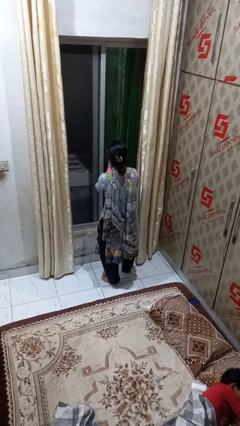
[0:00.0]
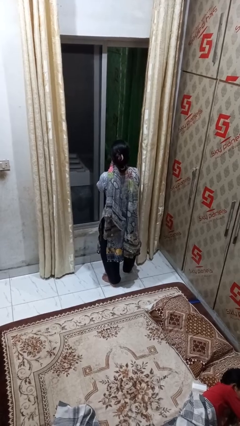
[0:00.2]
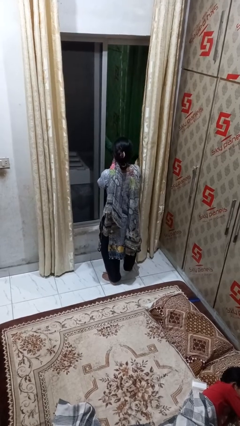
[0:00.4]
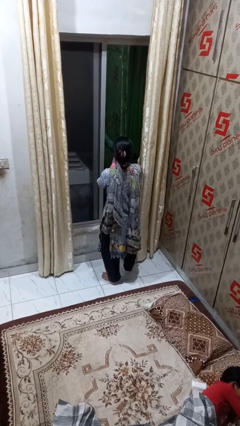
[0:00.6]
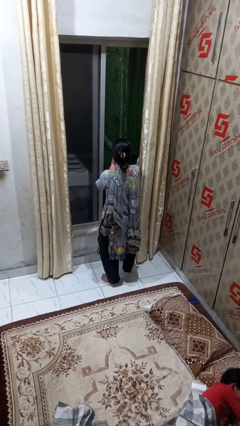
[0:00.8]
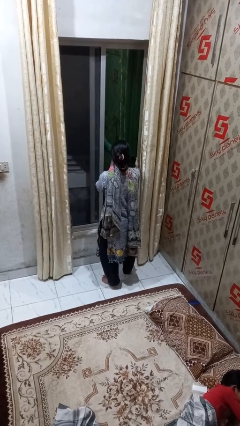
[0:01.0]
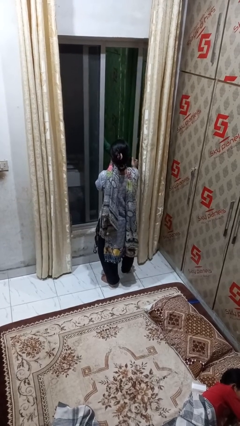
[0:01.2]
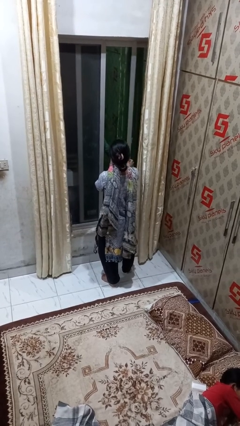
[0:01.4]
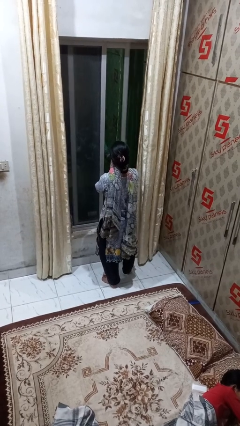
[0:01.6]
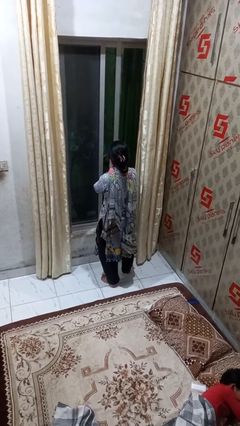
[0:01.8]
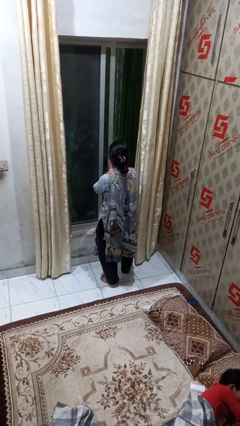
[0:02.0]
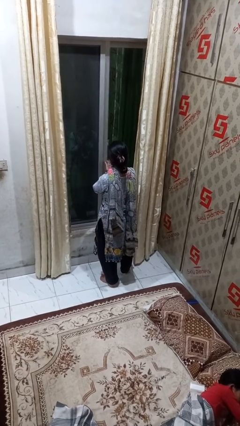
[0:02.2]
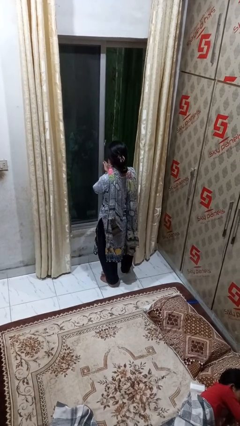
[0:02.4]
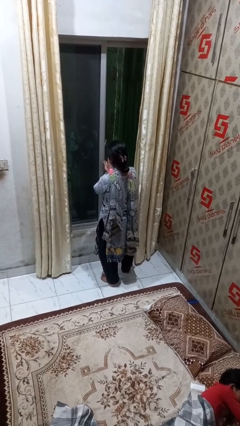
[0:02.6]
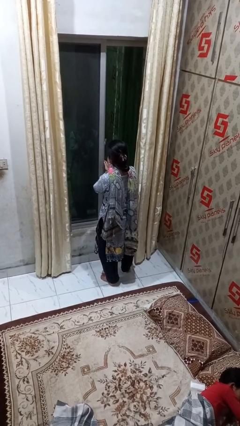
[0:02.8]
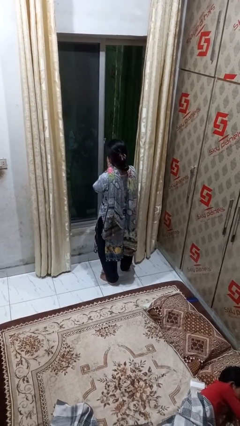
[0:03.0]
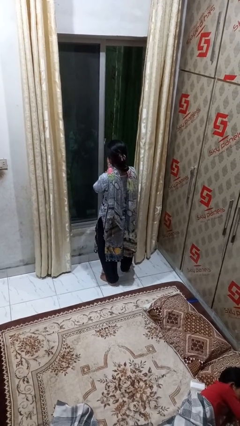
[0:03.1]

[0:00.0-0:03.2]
person closes home window

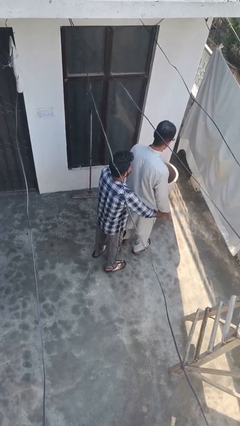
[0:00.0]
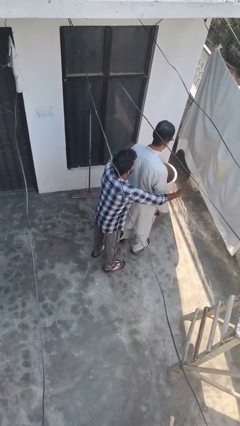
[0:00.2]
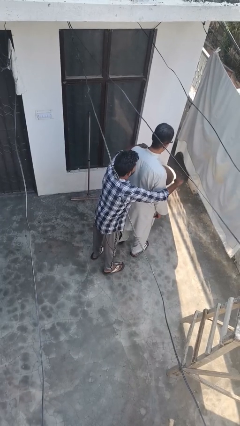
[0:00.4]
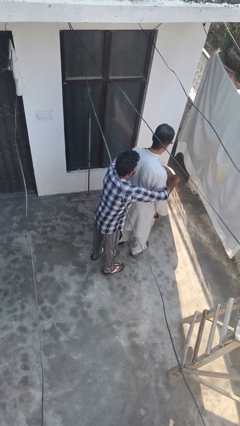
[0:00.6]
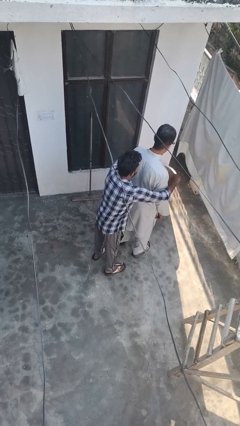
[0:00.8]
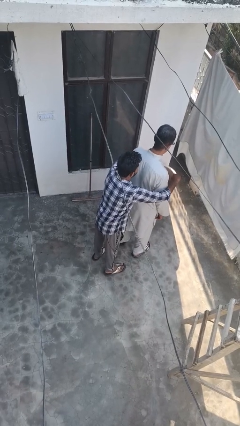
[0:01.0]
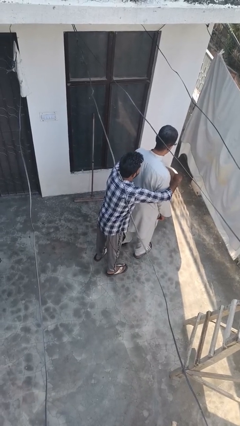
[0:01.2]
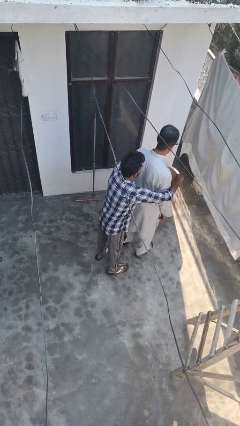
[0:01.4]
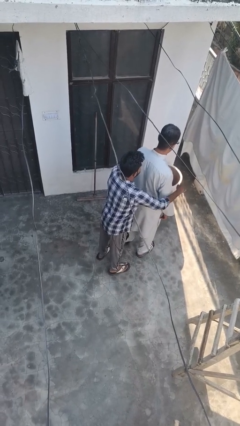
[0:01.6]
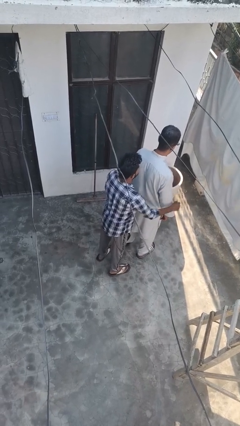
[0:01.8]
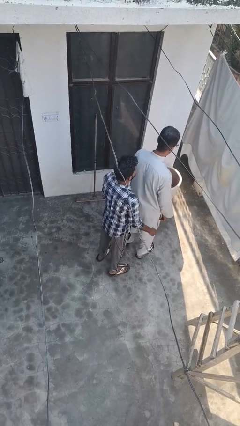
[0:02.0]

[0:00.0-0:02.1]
person hugs person from behind

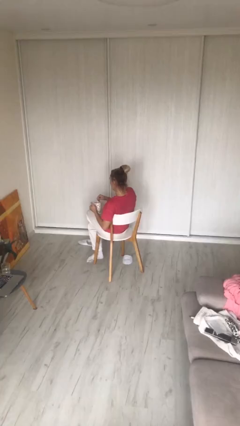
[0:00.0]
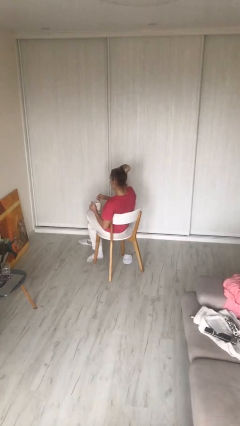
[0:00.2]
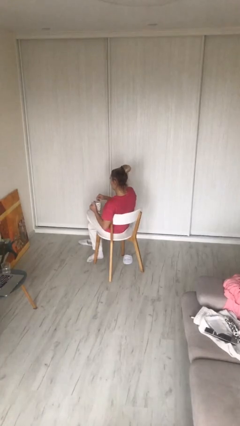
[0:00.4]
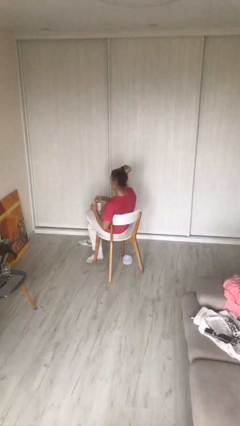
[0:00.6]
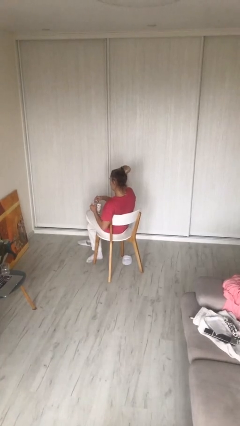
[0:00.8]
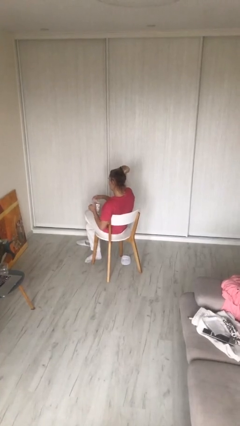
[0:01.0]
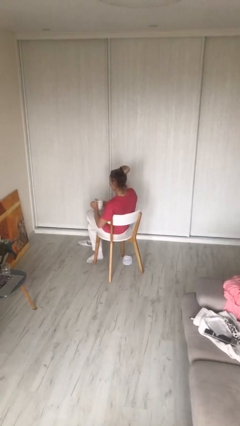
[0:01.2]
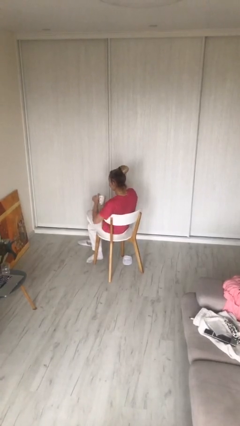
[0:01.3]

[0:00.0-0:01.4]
person stirs mug

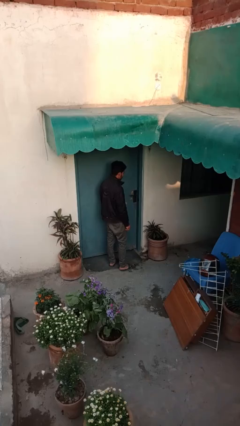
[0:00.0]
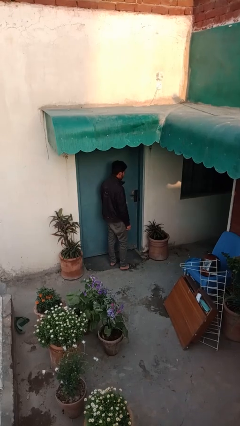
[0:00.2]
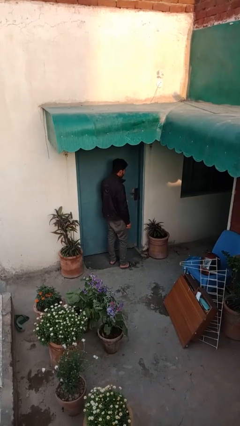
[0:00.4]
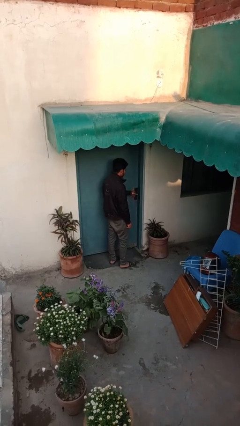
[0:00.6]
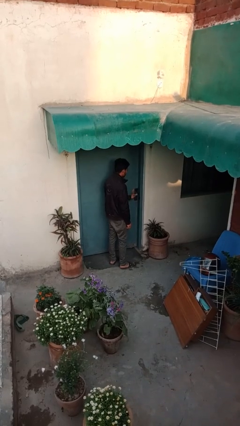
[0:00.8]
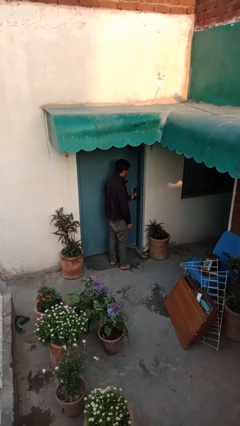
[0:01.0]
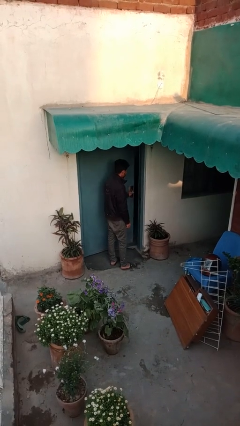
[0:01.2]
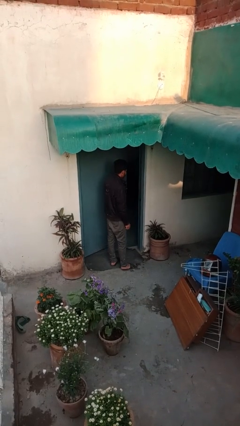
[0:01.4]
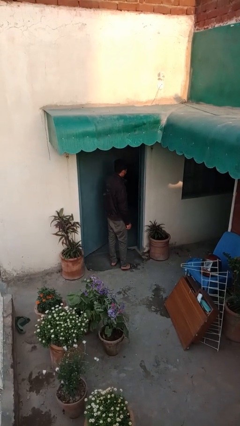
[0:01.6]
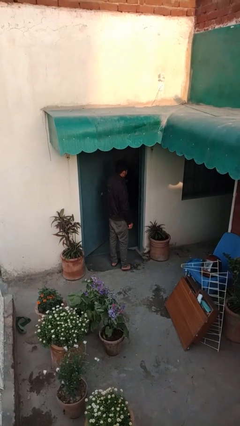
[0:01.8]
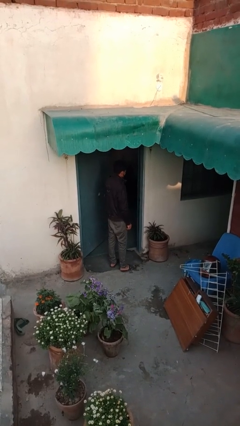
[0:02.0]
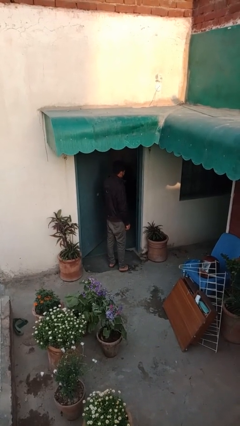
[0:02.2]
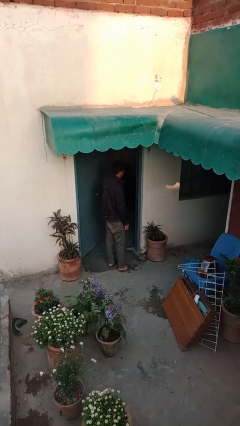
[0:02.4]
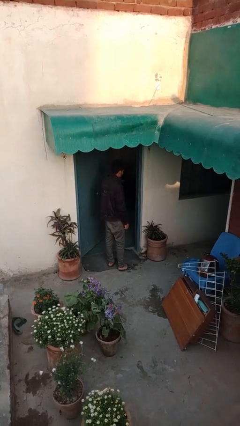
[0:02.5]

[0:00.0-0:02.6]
person opens facility door

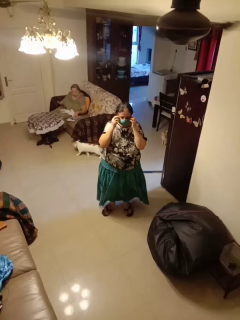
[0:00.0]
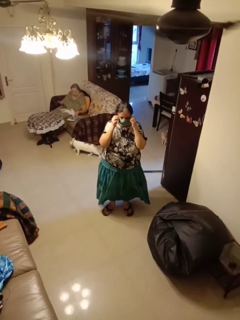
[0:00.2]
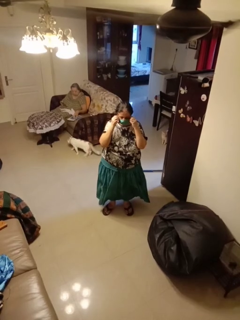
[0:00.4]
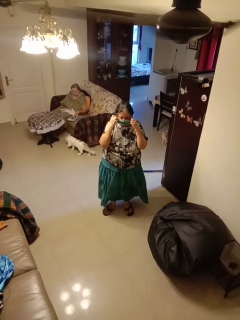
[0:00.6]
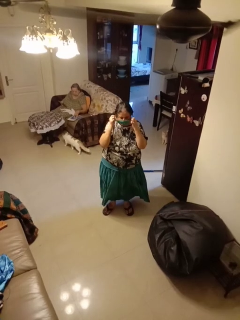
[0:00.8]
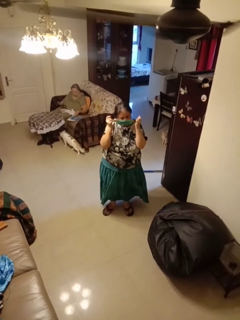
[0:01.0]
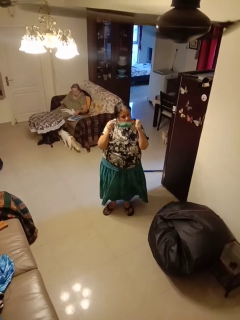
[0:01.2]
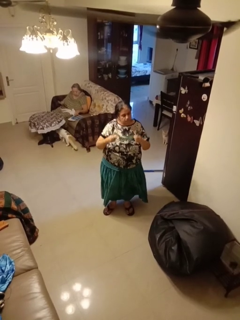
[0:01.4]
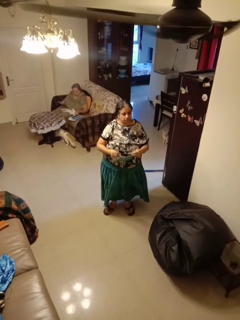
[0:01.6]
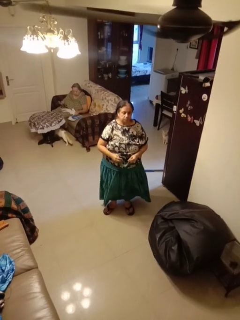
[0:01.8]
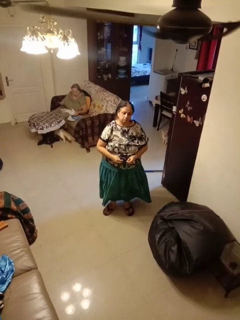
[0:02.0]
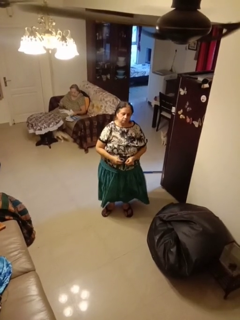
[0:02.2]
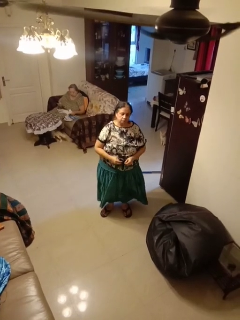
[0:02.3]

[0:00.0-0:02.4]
person takes off facemask

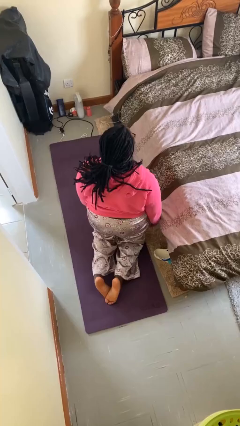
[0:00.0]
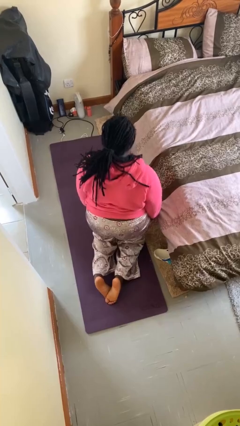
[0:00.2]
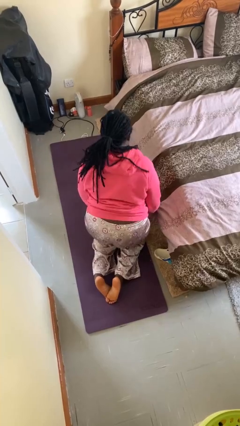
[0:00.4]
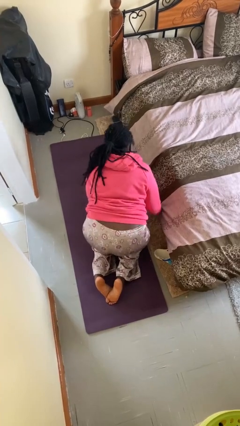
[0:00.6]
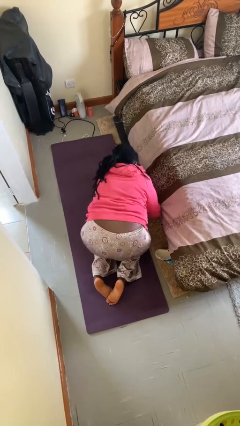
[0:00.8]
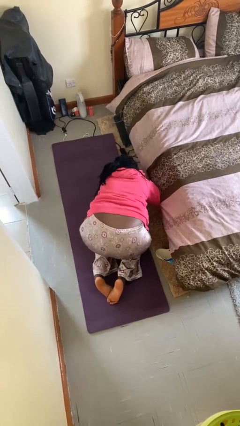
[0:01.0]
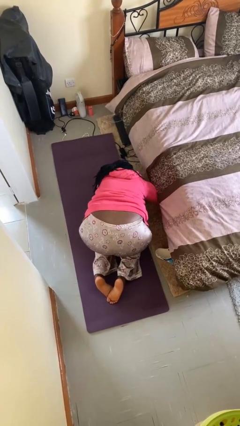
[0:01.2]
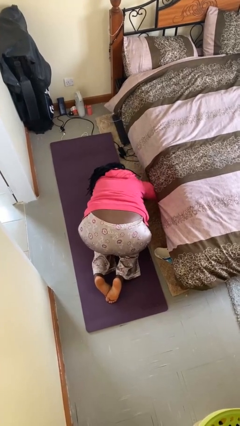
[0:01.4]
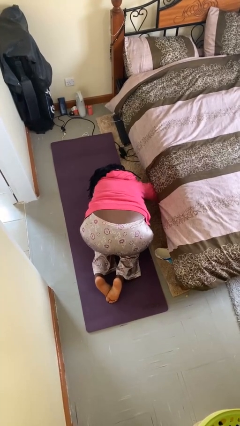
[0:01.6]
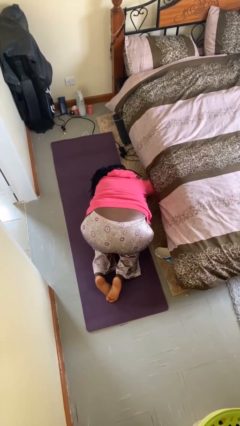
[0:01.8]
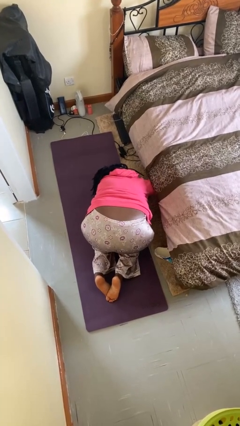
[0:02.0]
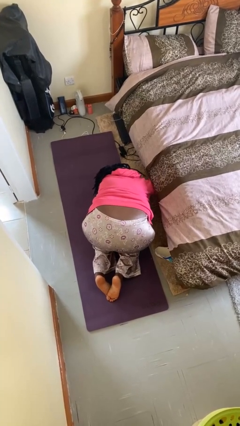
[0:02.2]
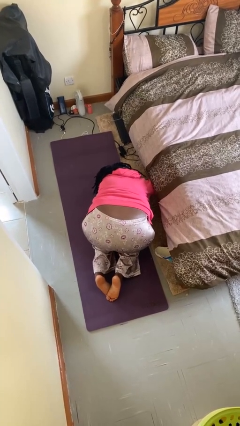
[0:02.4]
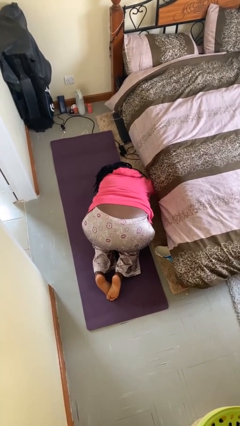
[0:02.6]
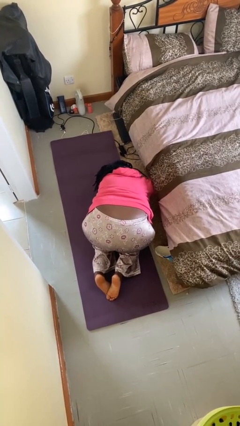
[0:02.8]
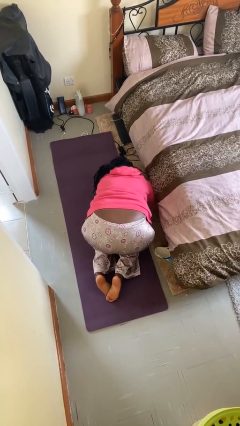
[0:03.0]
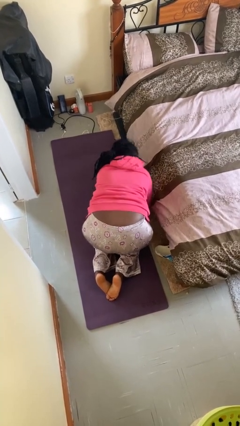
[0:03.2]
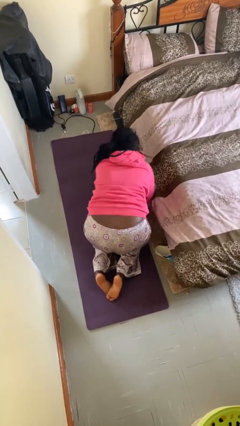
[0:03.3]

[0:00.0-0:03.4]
person searches under bed

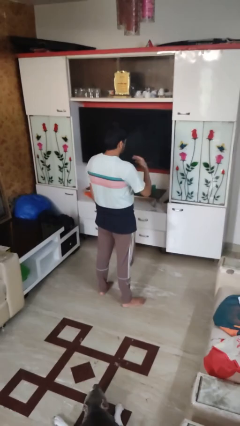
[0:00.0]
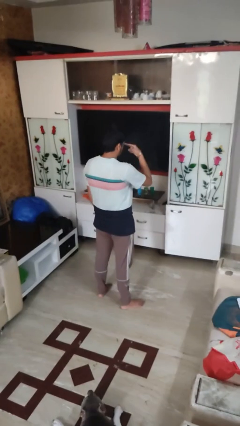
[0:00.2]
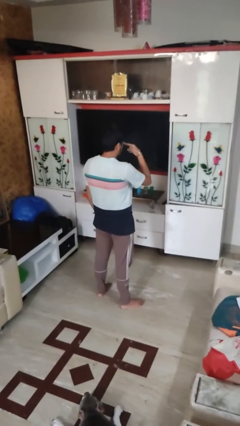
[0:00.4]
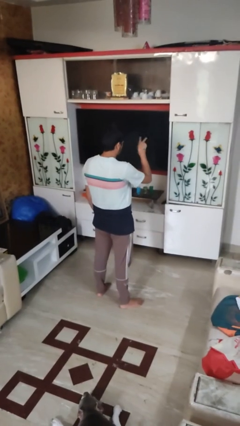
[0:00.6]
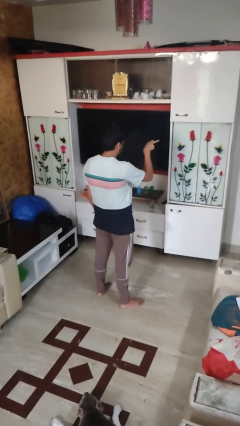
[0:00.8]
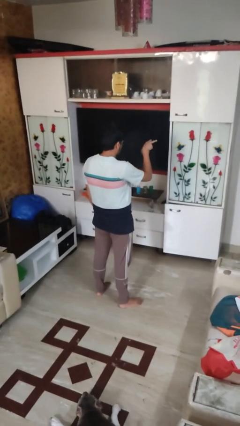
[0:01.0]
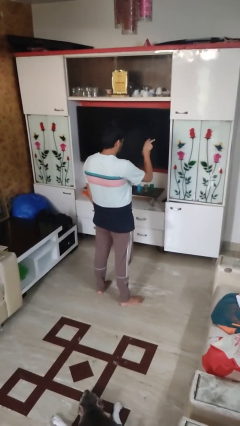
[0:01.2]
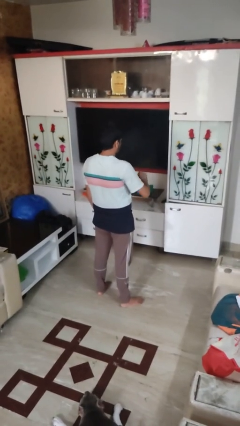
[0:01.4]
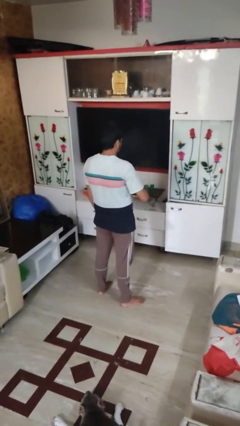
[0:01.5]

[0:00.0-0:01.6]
person gestures watch closely

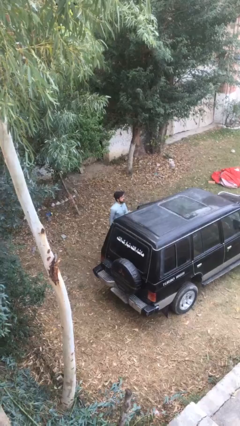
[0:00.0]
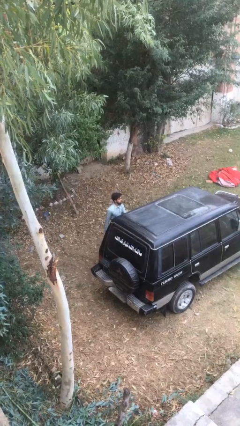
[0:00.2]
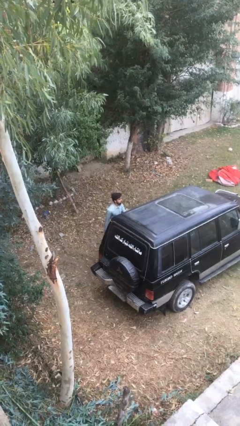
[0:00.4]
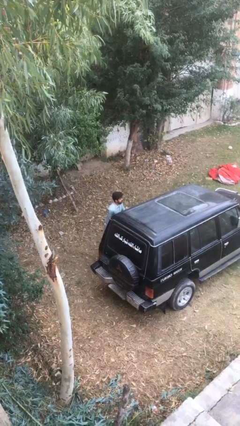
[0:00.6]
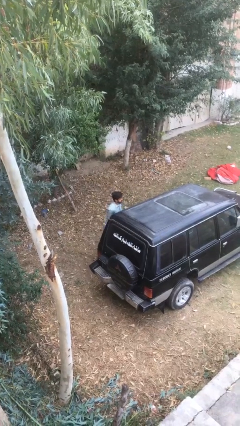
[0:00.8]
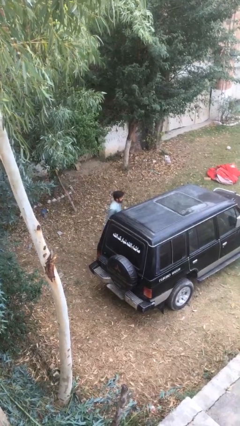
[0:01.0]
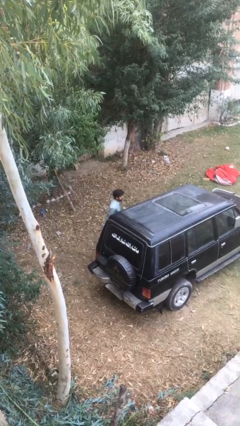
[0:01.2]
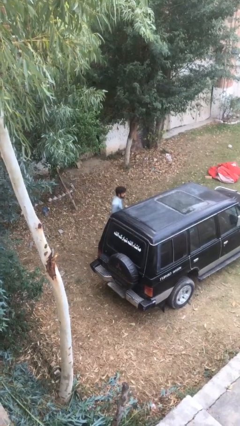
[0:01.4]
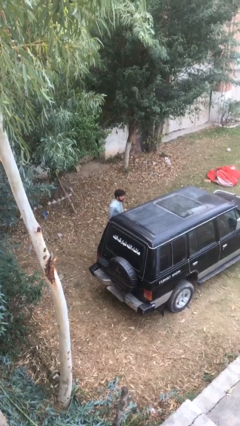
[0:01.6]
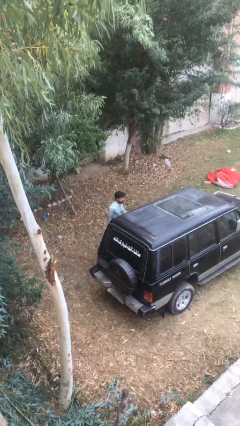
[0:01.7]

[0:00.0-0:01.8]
person closes car door
